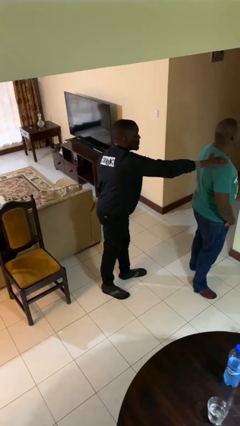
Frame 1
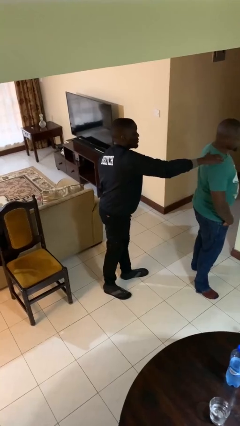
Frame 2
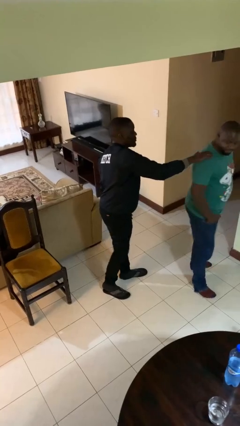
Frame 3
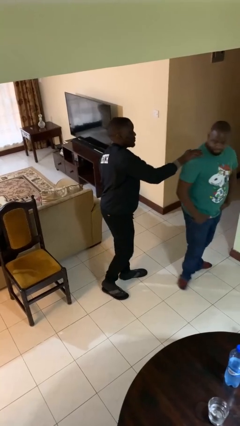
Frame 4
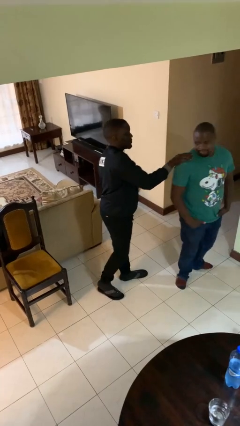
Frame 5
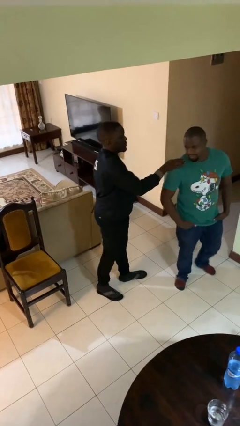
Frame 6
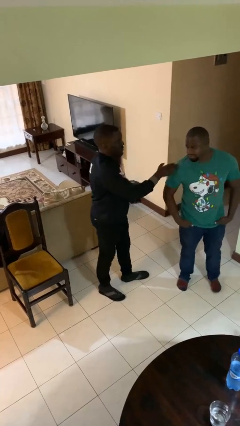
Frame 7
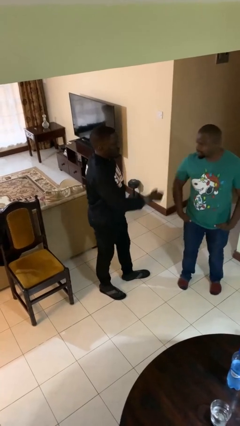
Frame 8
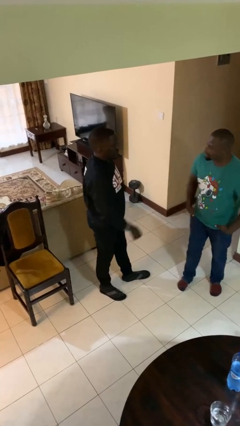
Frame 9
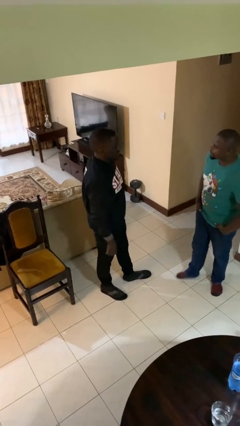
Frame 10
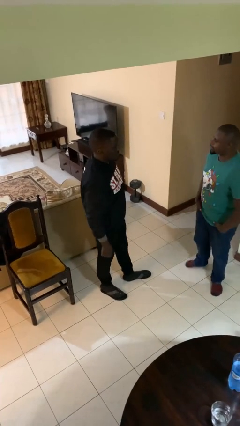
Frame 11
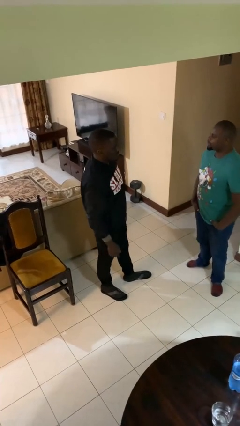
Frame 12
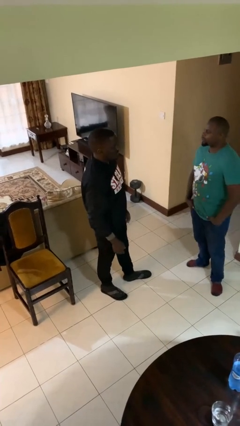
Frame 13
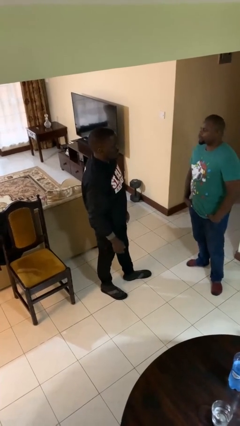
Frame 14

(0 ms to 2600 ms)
person spins person around

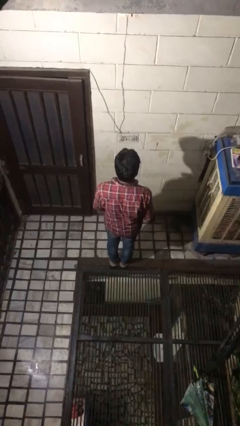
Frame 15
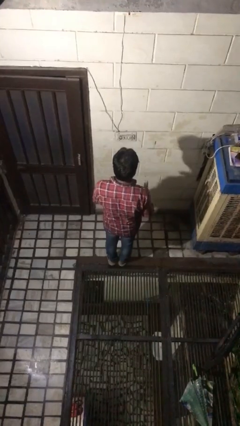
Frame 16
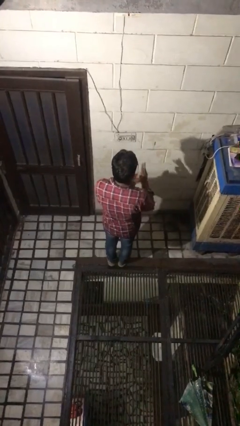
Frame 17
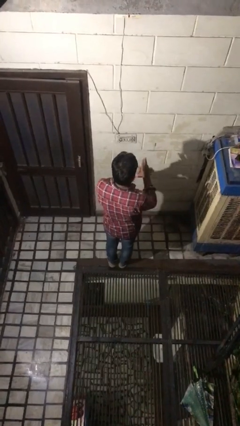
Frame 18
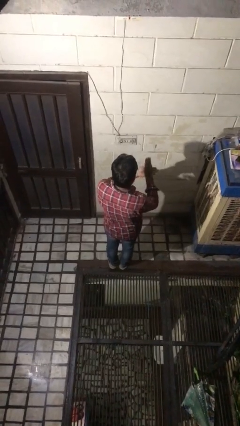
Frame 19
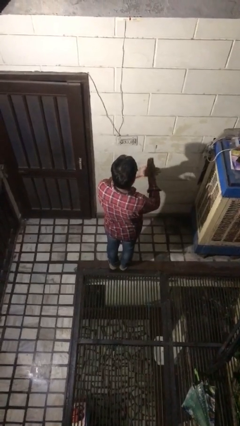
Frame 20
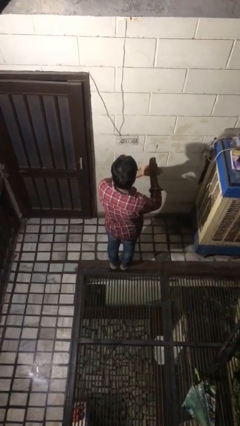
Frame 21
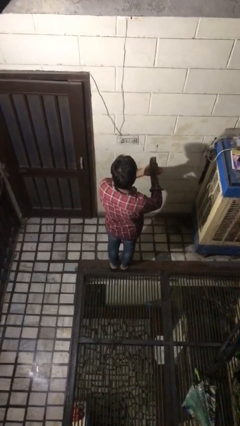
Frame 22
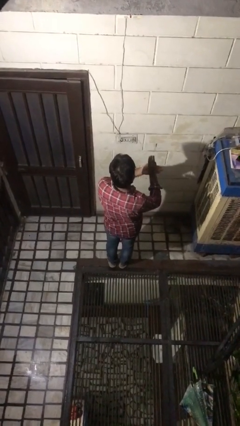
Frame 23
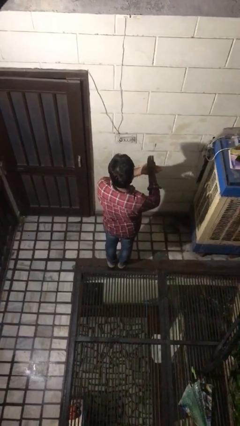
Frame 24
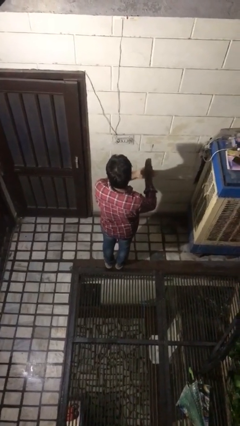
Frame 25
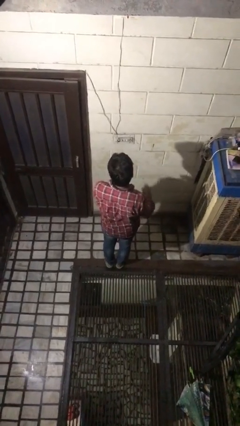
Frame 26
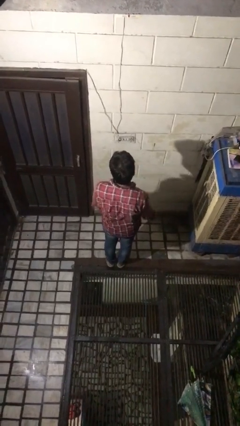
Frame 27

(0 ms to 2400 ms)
person gestures number three

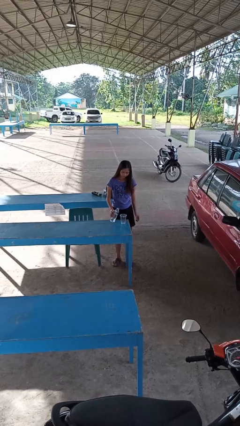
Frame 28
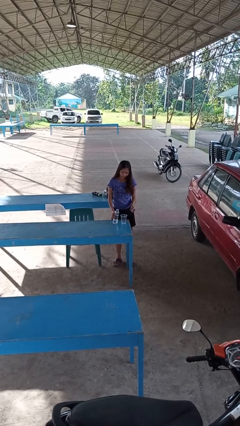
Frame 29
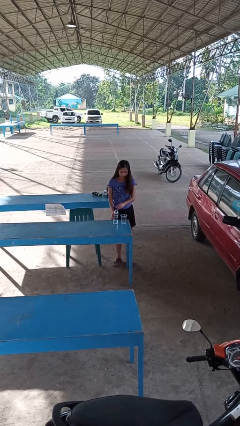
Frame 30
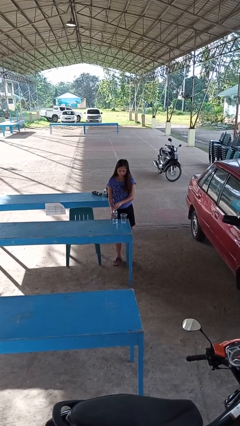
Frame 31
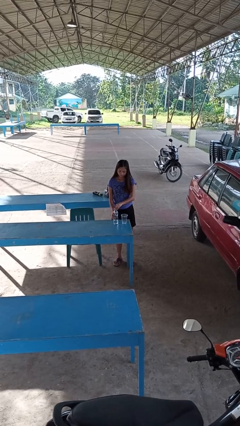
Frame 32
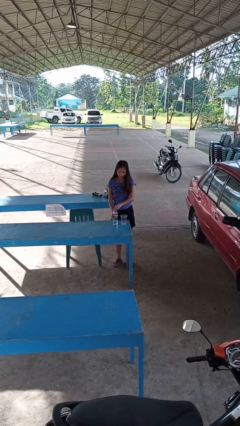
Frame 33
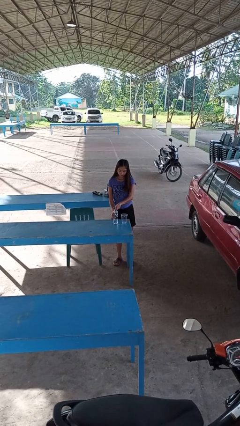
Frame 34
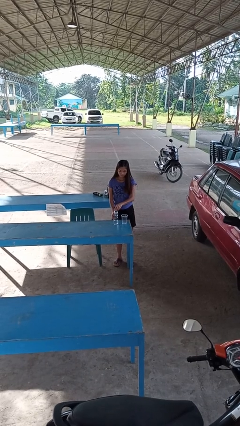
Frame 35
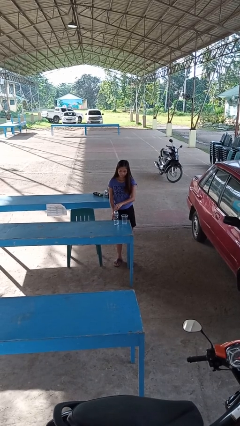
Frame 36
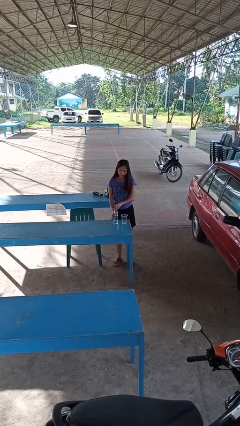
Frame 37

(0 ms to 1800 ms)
person screws lid to bottle

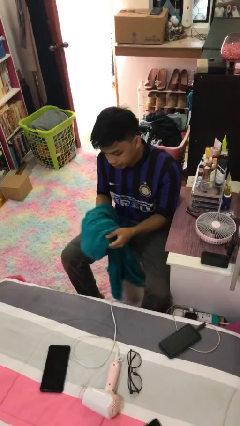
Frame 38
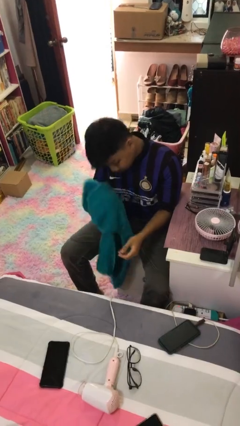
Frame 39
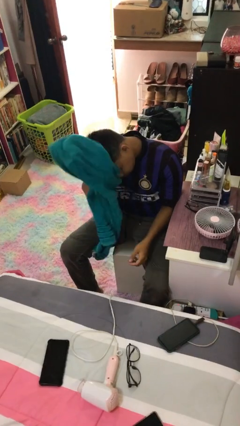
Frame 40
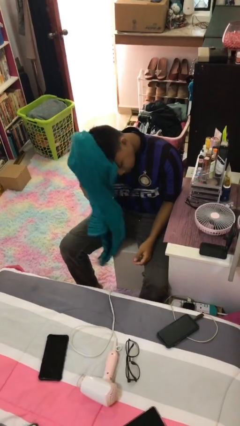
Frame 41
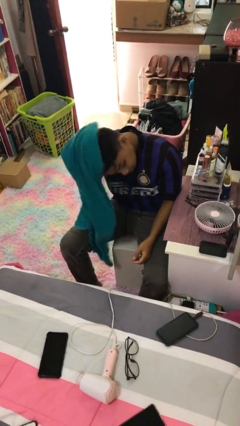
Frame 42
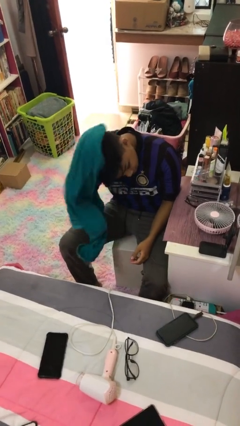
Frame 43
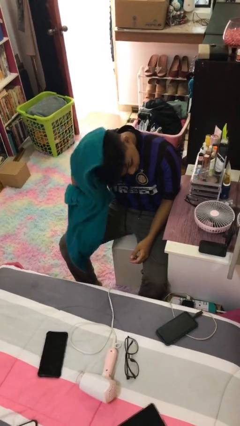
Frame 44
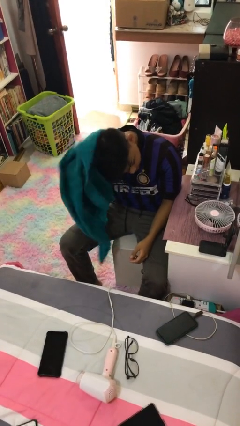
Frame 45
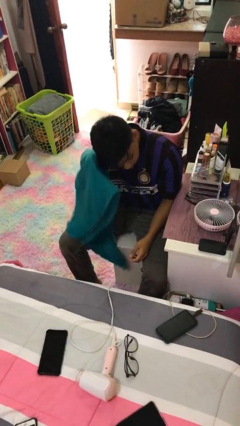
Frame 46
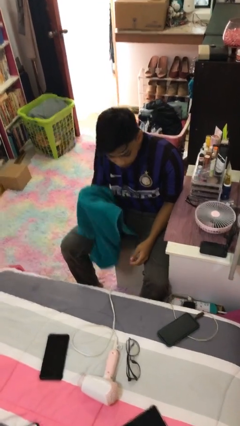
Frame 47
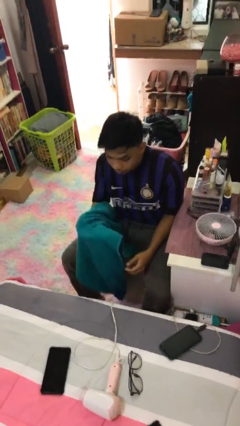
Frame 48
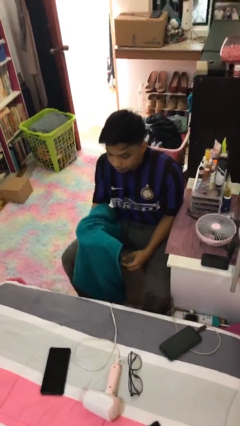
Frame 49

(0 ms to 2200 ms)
person dries hair with towel

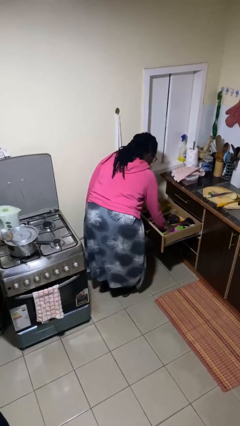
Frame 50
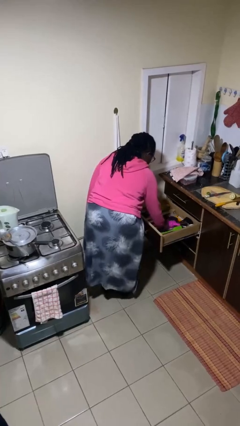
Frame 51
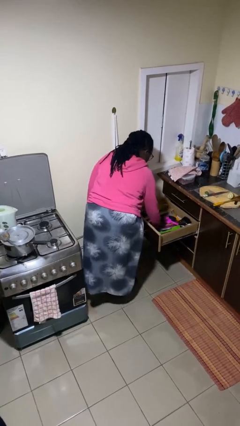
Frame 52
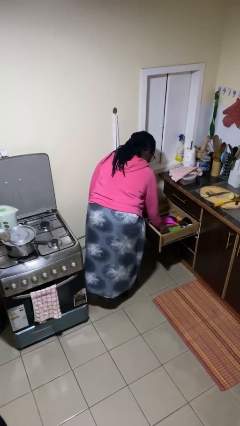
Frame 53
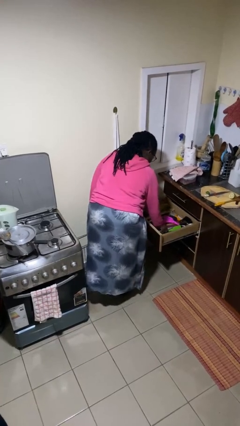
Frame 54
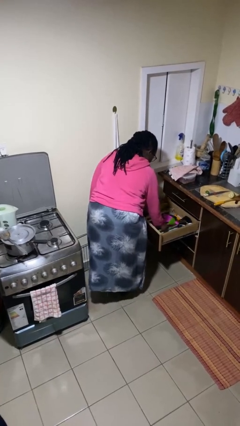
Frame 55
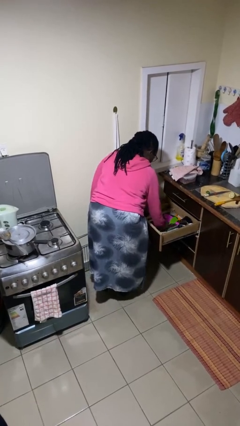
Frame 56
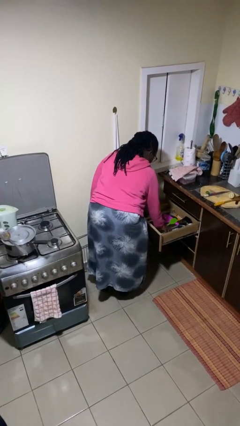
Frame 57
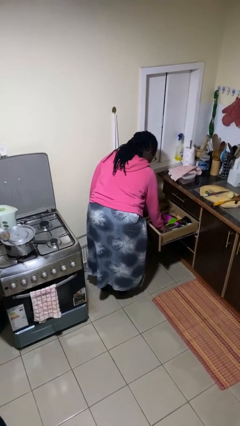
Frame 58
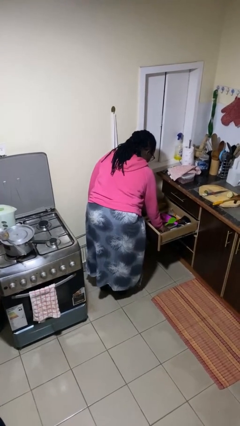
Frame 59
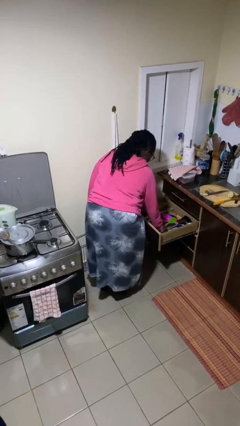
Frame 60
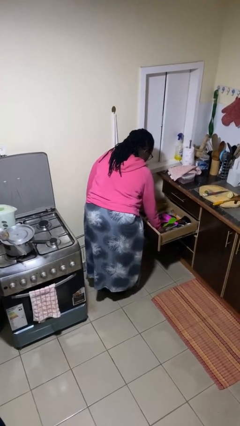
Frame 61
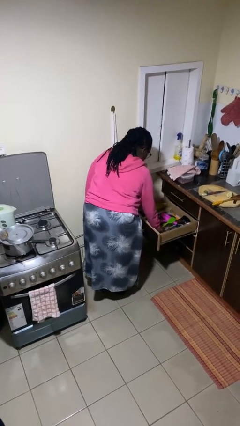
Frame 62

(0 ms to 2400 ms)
person searches in kitchen drawer

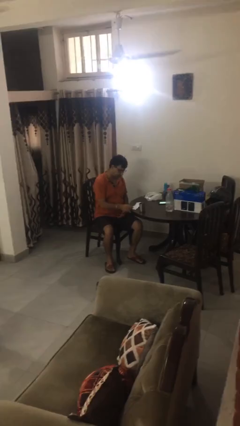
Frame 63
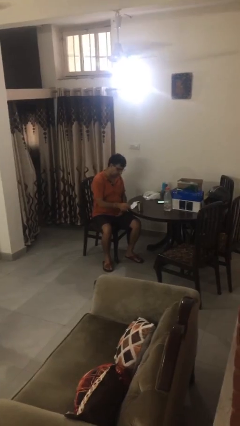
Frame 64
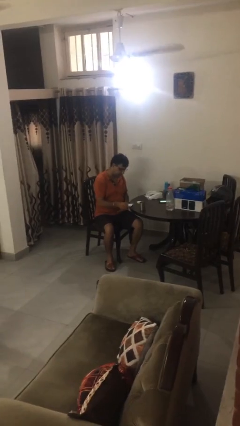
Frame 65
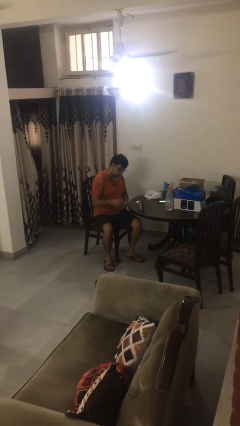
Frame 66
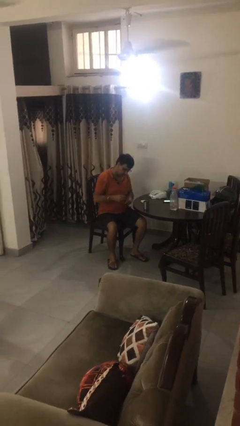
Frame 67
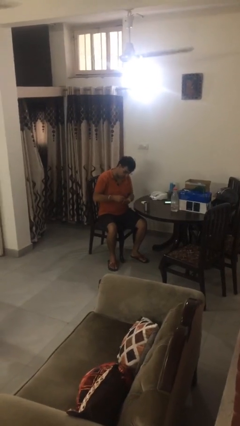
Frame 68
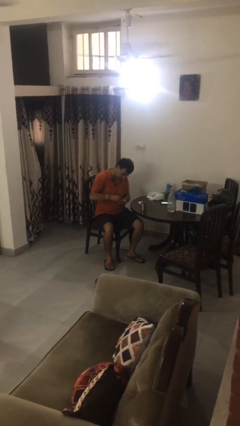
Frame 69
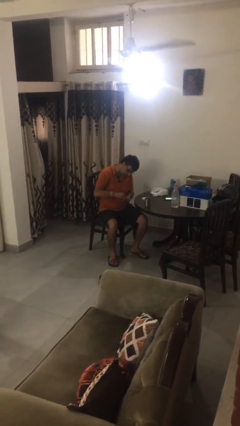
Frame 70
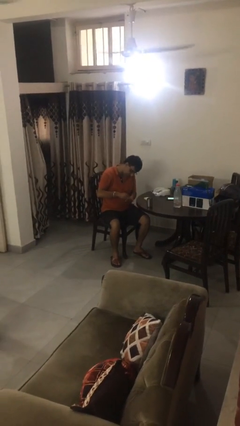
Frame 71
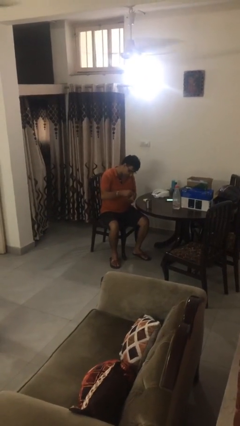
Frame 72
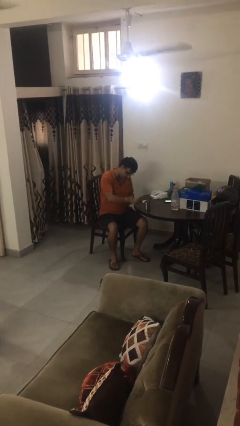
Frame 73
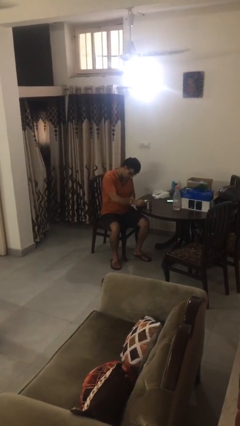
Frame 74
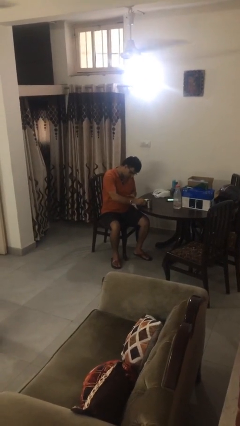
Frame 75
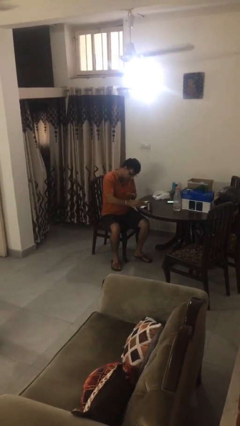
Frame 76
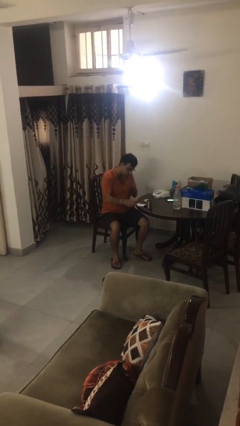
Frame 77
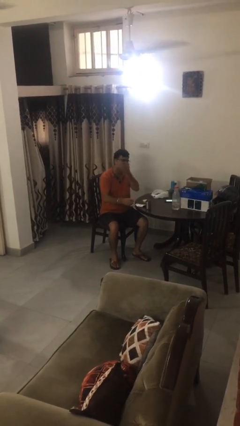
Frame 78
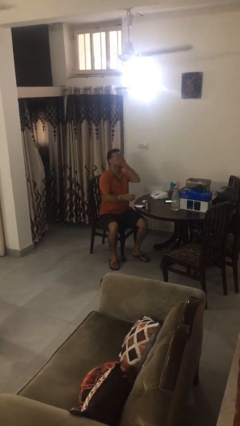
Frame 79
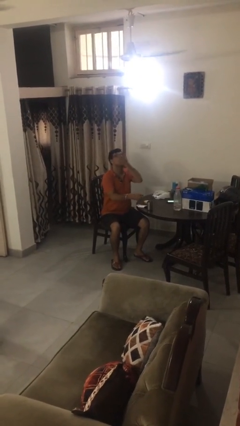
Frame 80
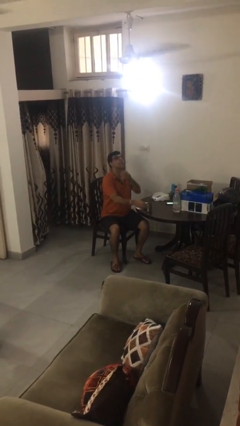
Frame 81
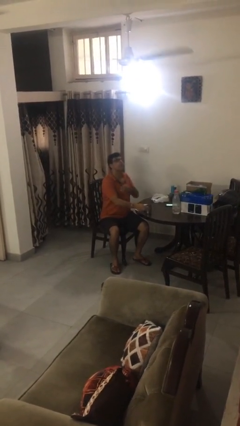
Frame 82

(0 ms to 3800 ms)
person takes medicine pills

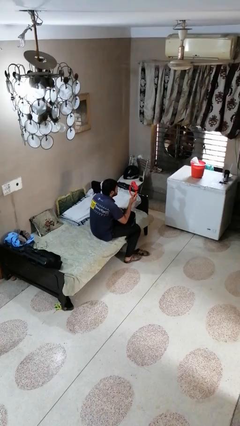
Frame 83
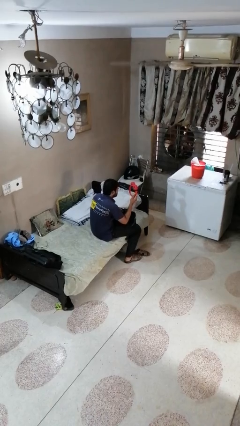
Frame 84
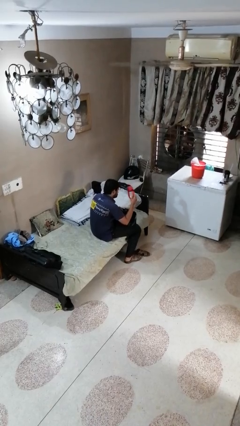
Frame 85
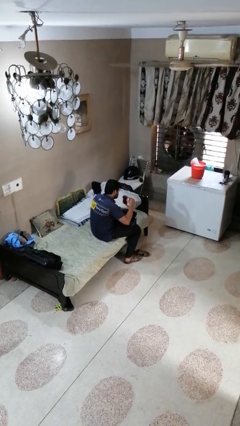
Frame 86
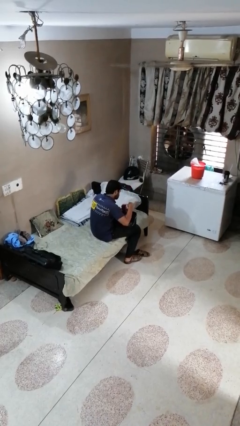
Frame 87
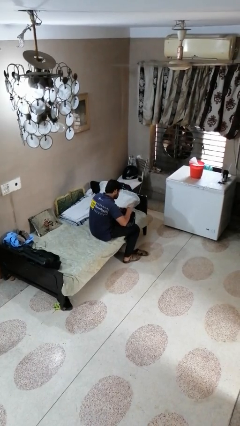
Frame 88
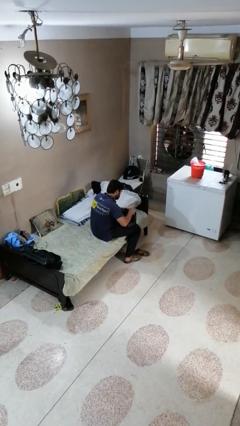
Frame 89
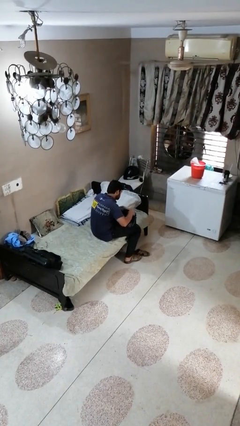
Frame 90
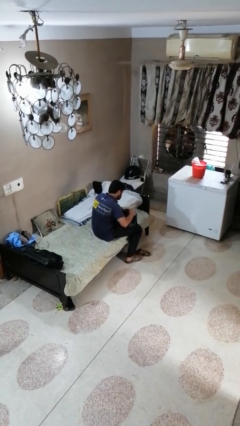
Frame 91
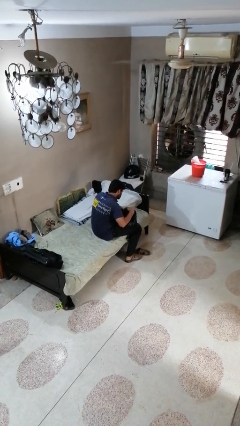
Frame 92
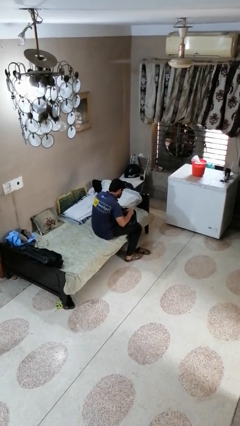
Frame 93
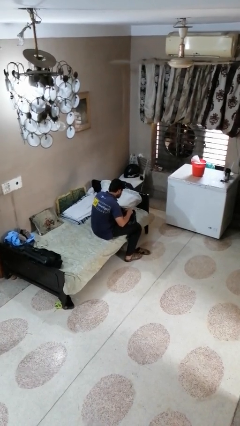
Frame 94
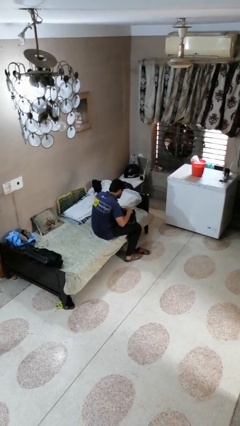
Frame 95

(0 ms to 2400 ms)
person puts object into purse
